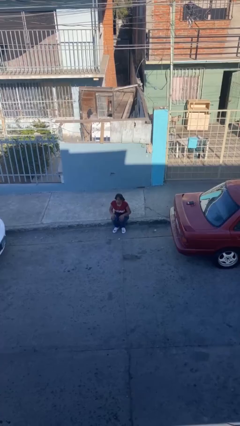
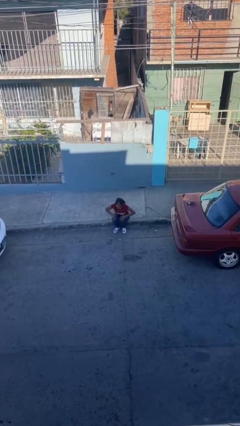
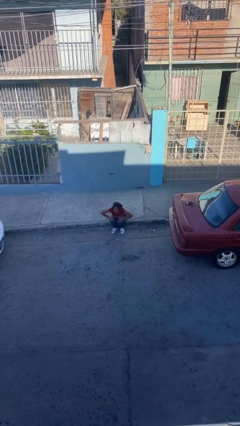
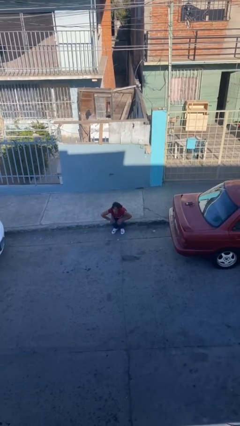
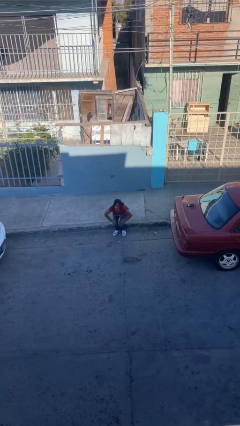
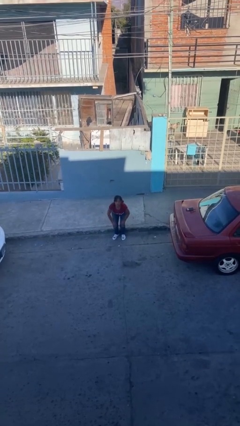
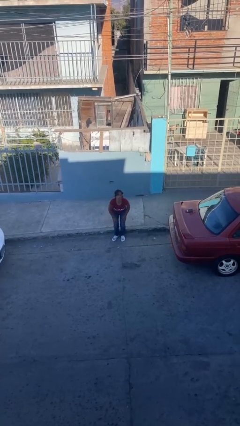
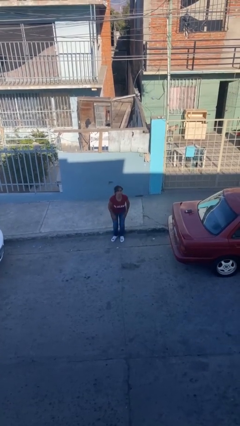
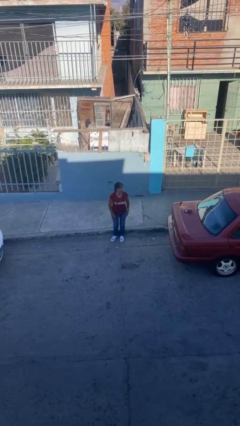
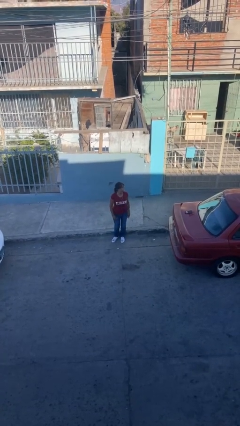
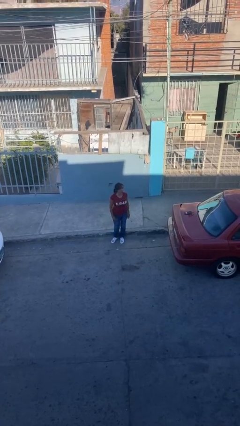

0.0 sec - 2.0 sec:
person stands up

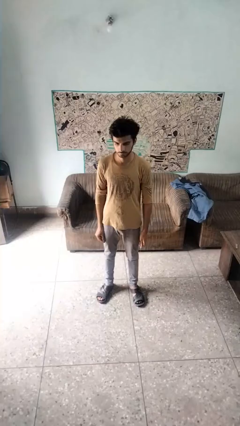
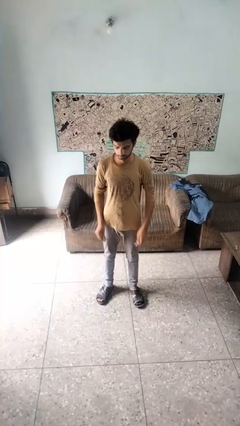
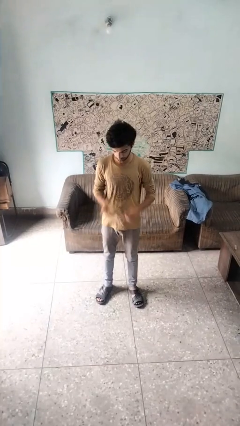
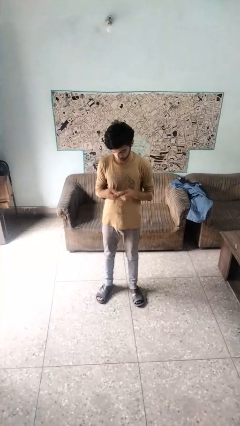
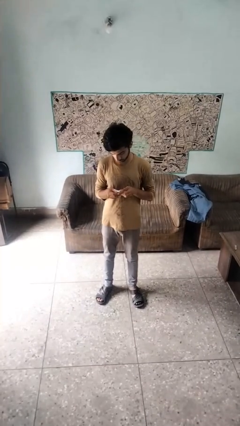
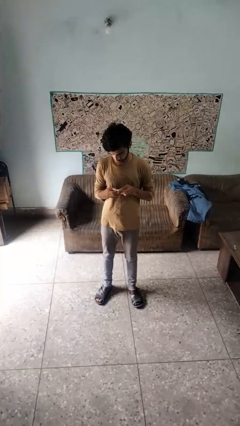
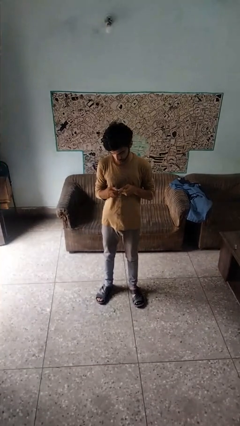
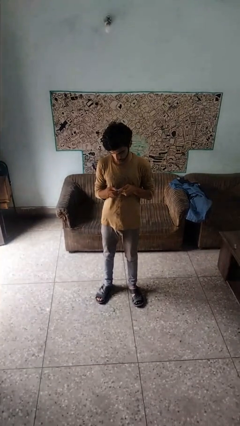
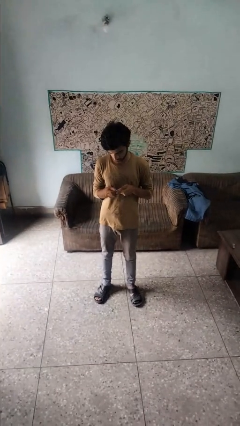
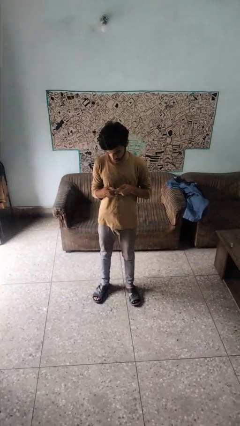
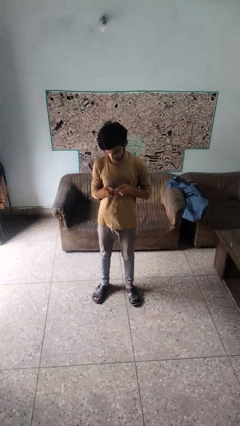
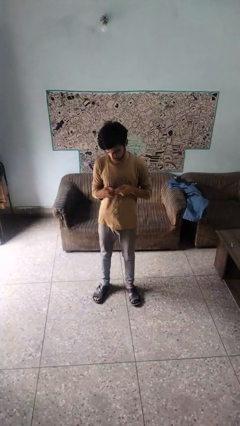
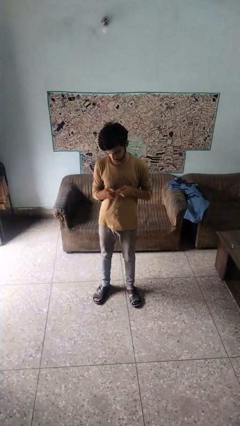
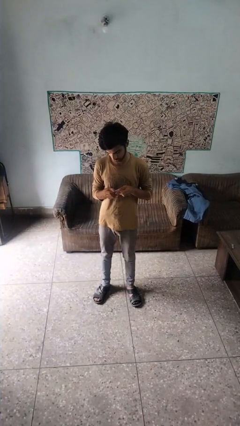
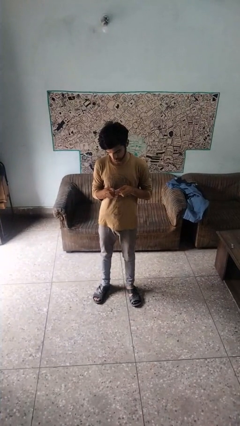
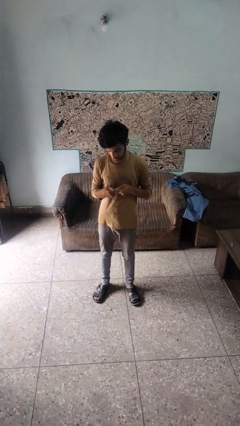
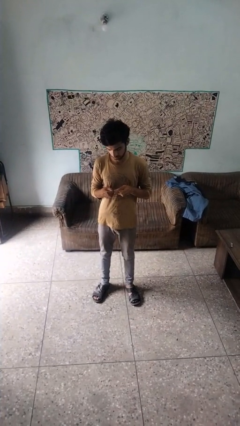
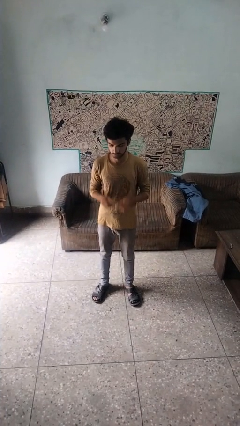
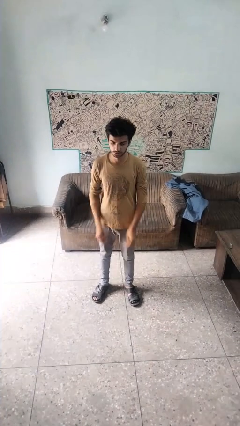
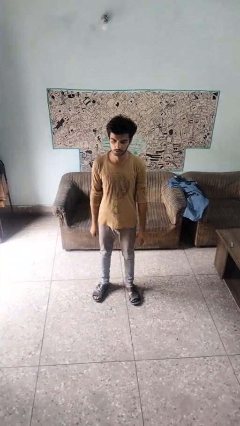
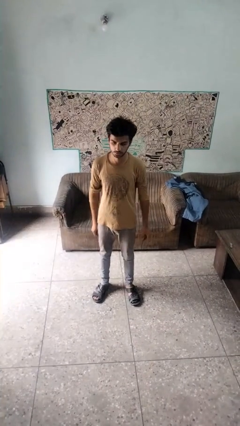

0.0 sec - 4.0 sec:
person files fingernails

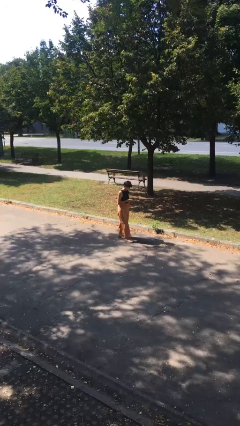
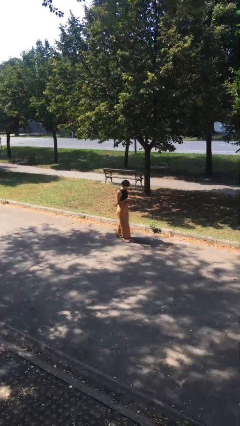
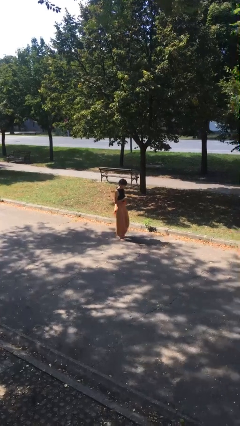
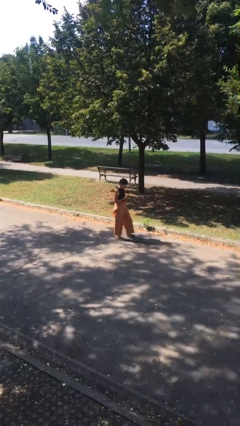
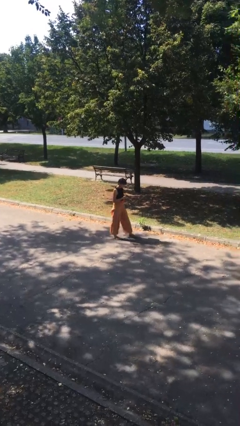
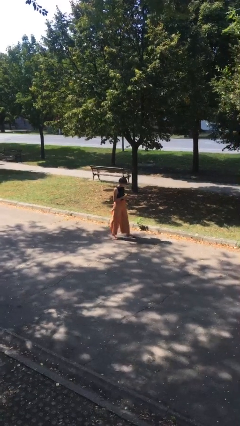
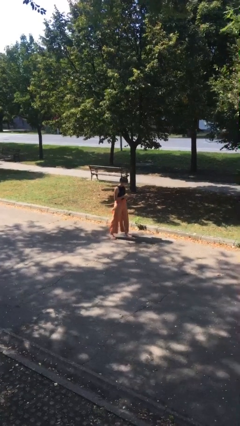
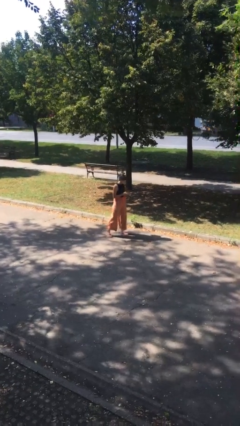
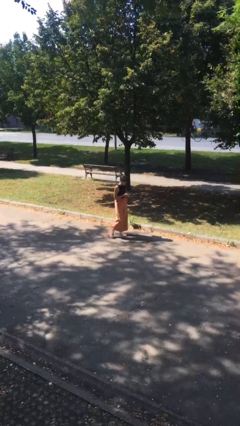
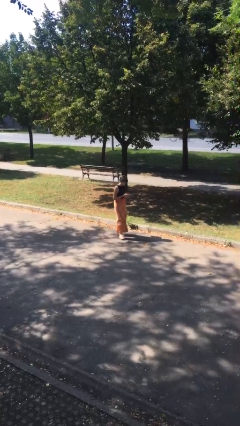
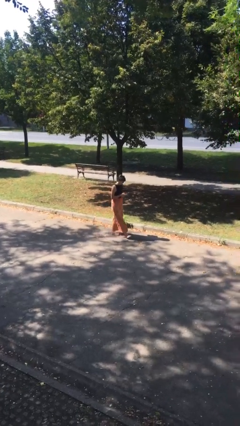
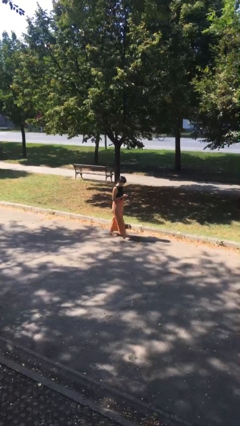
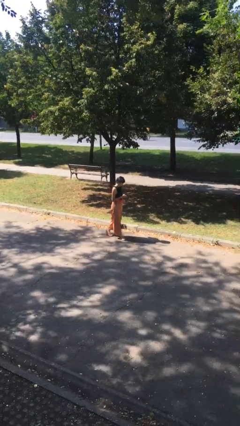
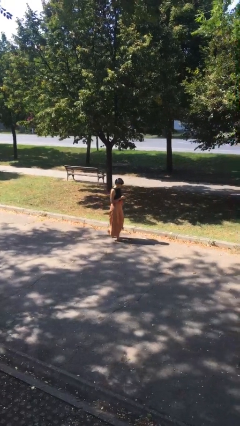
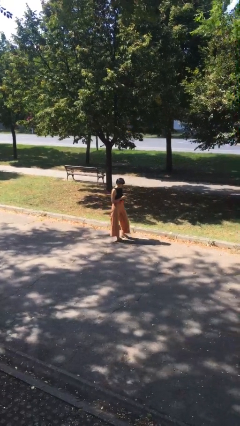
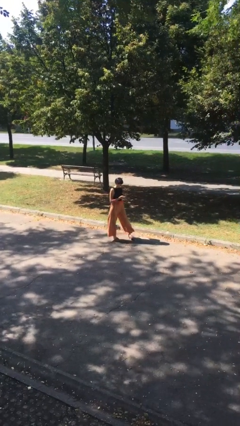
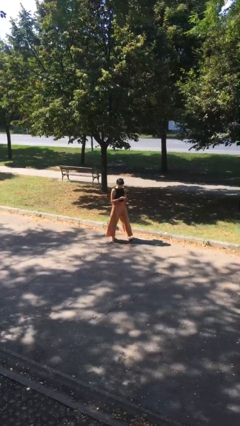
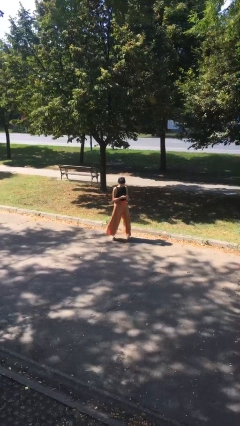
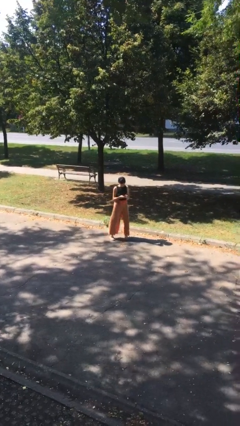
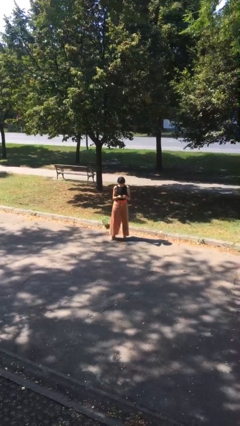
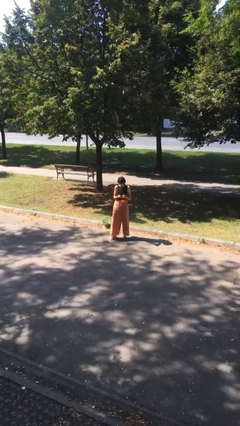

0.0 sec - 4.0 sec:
person texts on phone

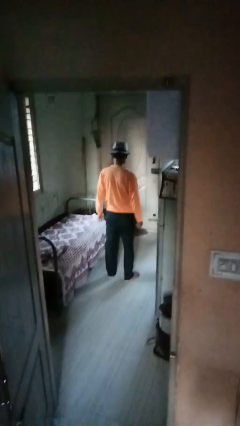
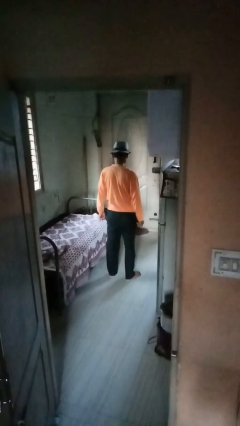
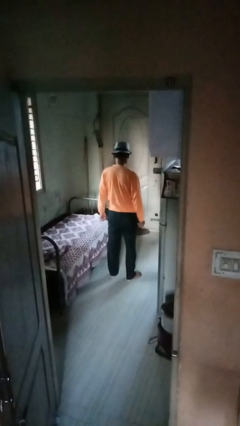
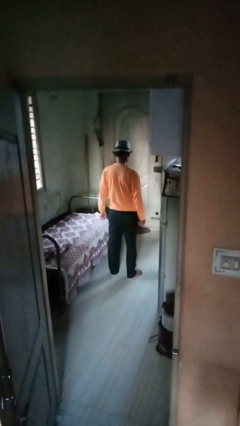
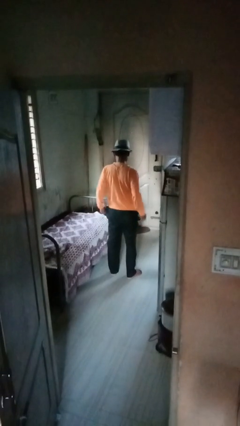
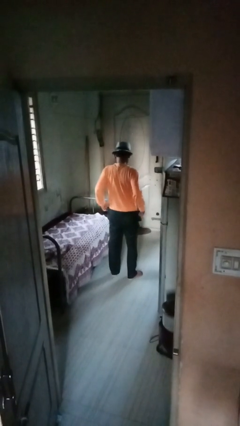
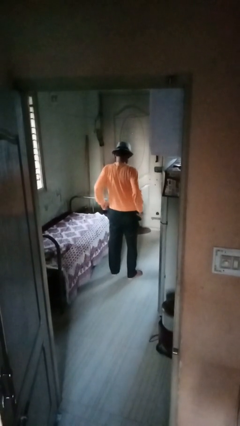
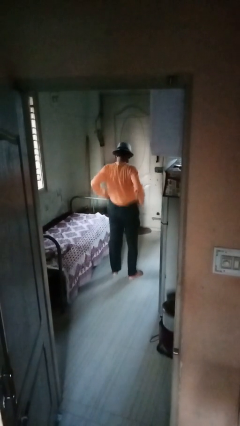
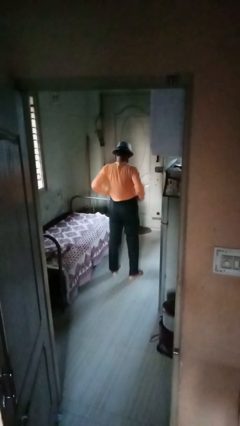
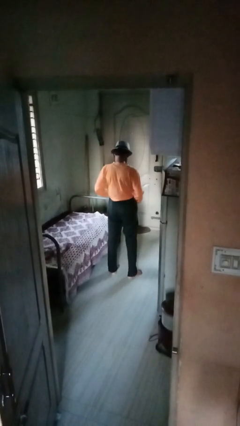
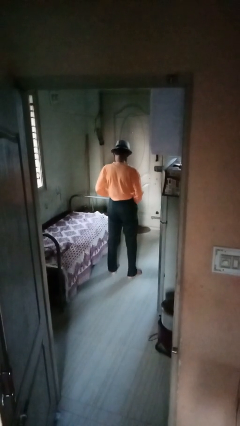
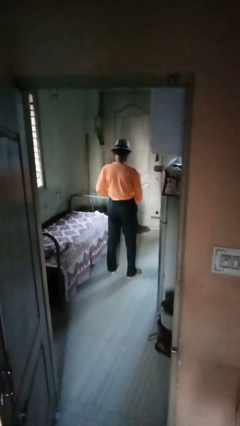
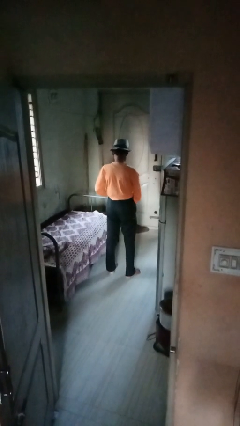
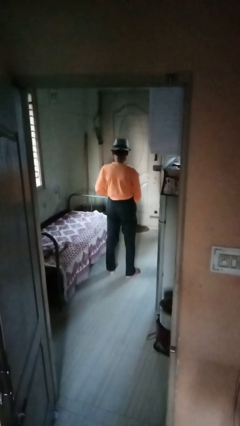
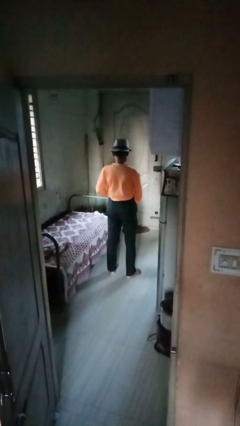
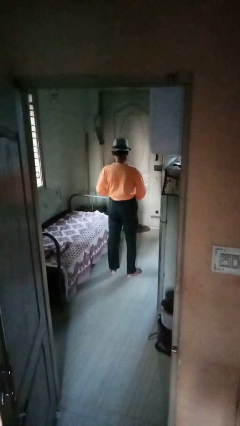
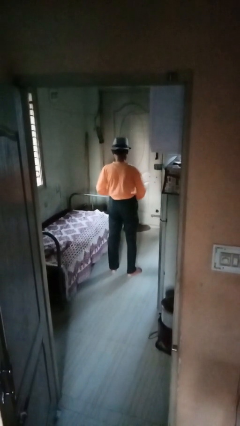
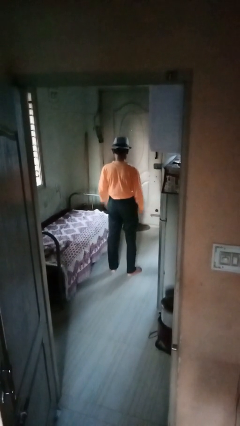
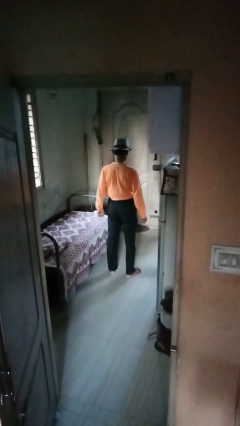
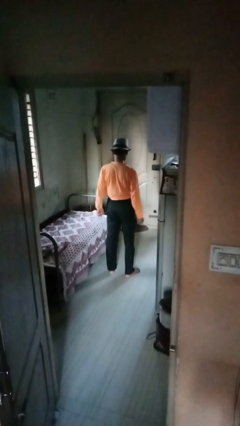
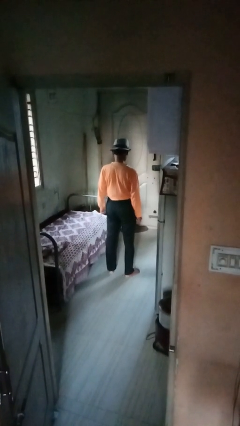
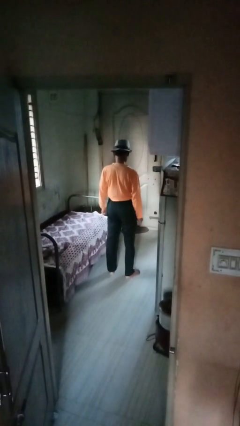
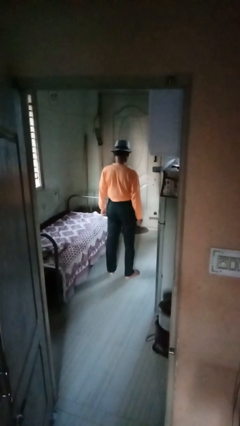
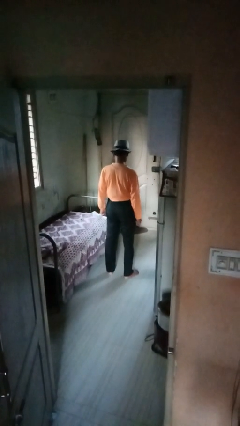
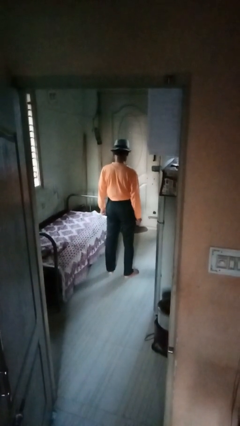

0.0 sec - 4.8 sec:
person hikes up pants

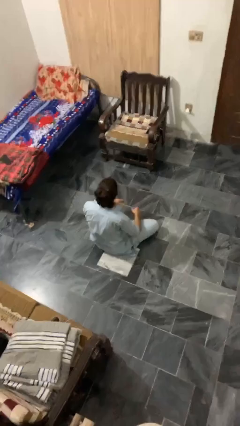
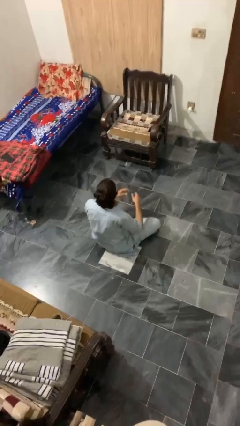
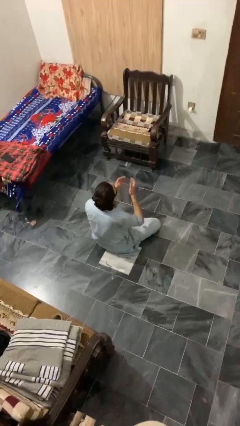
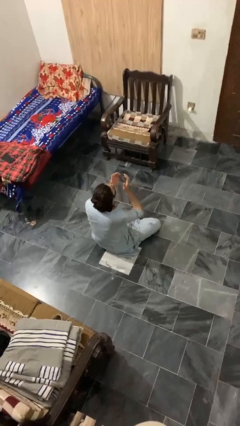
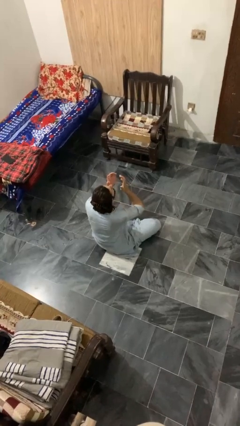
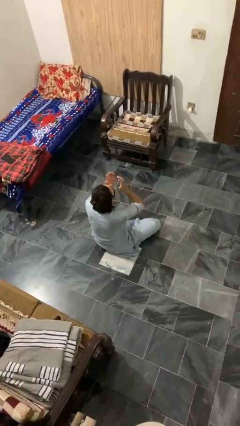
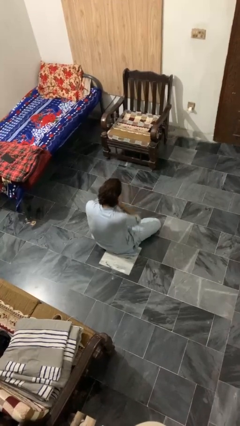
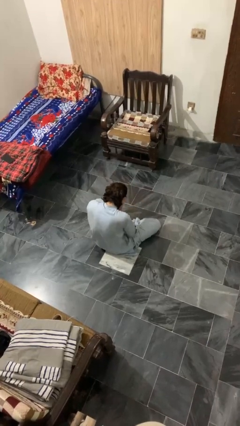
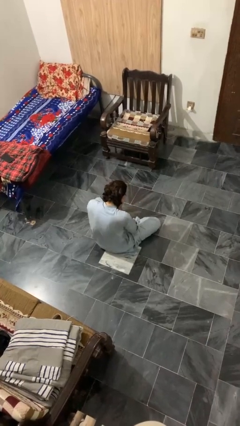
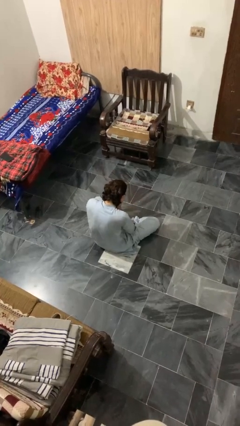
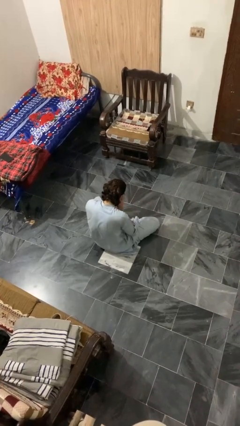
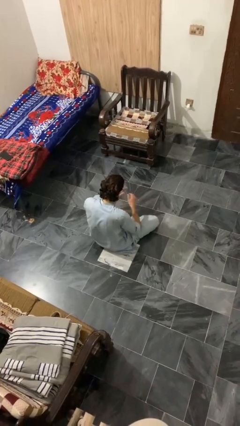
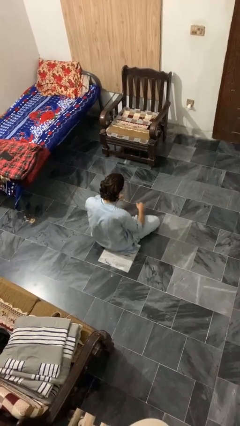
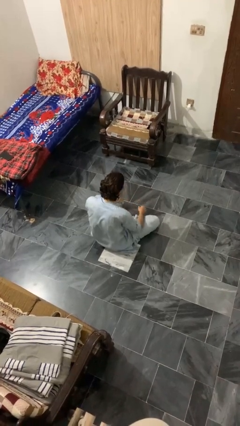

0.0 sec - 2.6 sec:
person sneezes into hand

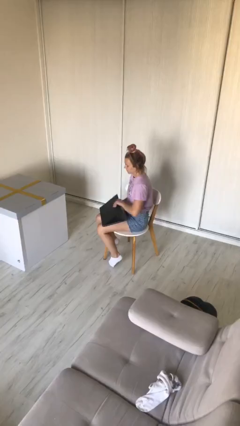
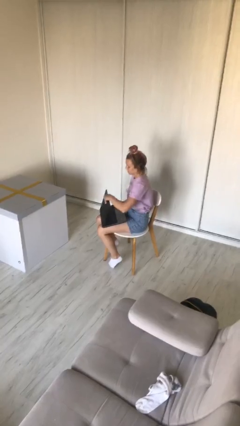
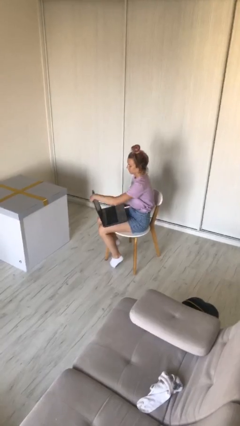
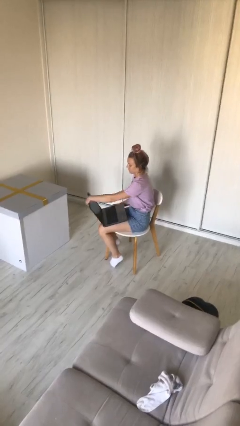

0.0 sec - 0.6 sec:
person opens laptop
